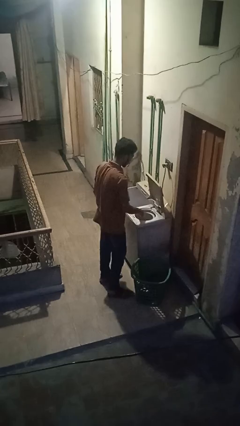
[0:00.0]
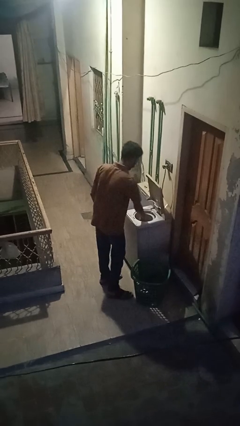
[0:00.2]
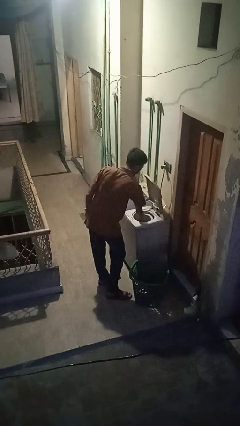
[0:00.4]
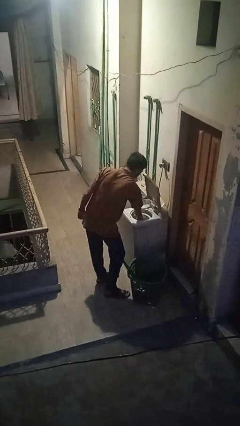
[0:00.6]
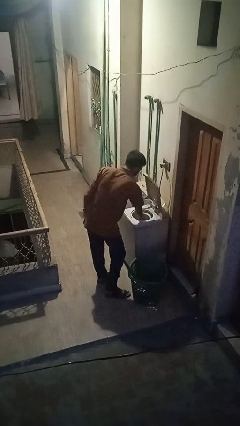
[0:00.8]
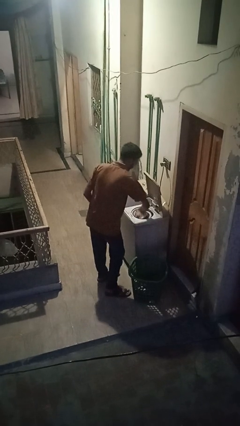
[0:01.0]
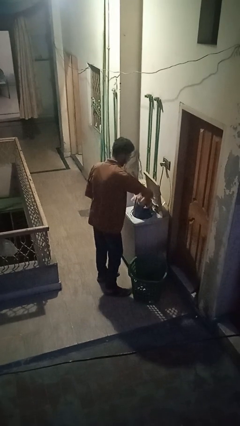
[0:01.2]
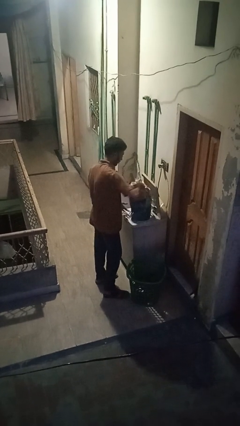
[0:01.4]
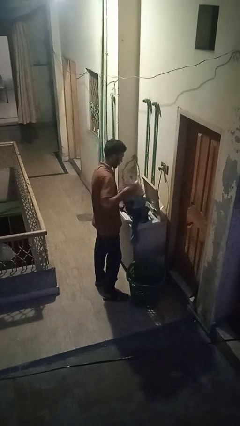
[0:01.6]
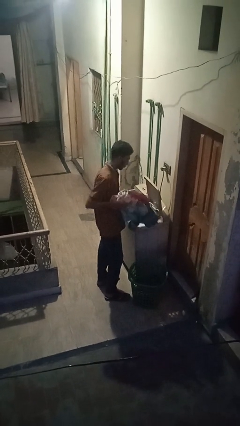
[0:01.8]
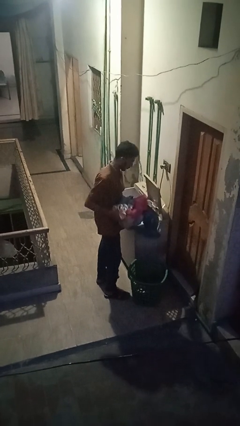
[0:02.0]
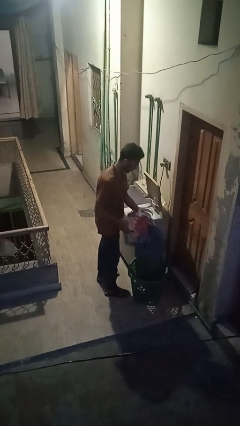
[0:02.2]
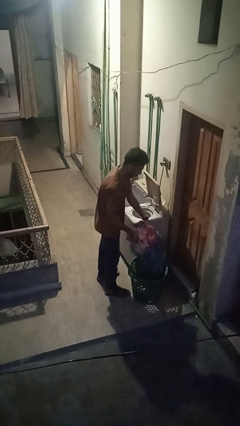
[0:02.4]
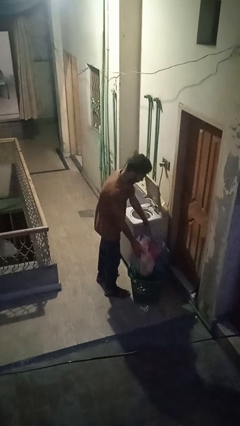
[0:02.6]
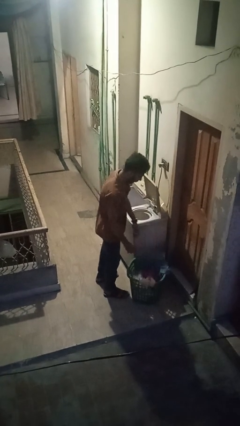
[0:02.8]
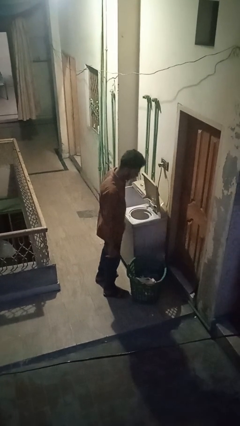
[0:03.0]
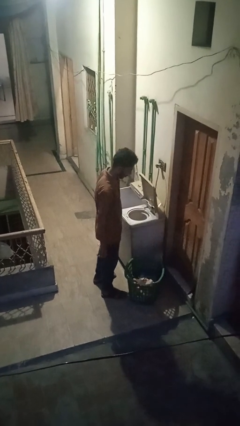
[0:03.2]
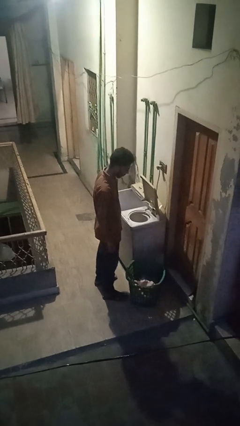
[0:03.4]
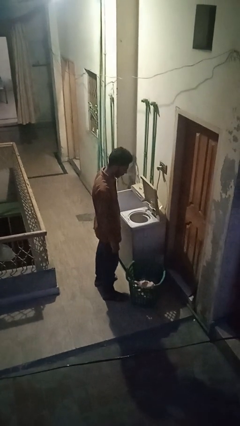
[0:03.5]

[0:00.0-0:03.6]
person unloads dryer

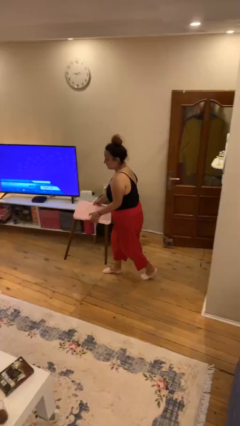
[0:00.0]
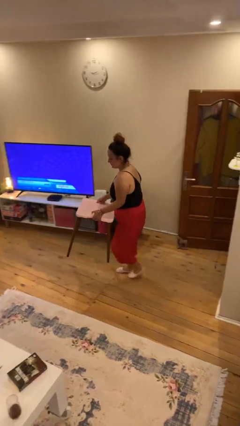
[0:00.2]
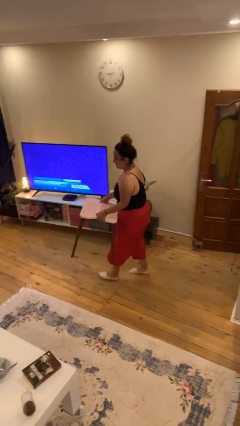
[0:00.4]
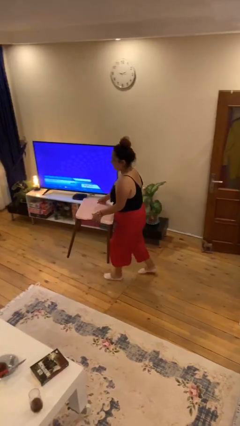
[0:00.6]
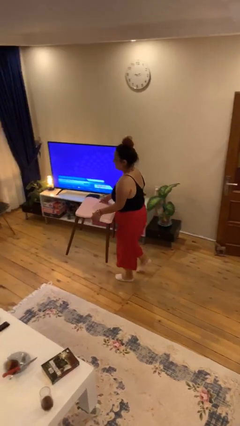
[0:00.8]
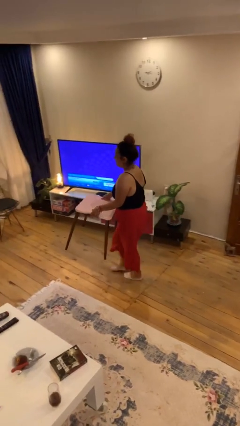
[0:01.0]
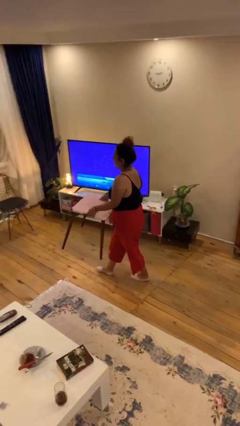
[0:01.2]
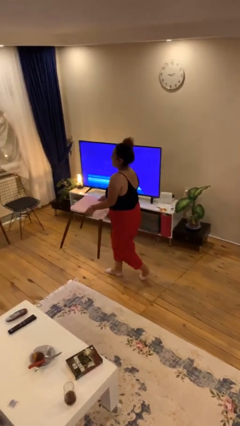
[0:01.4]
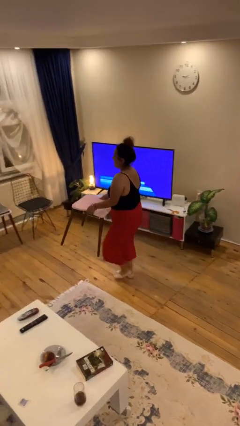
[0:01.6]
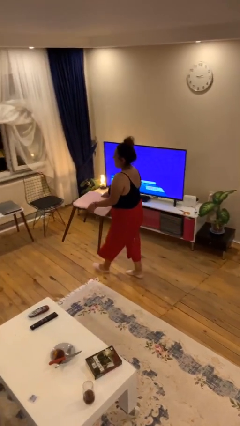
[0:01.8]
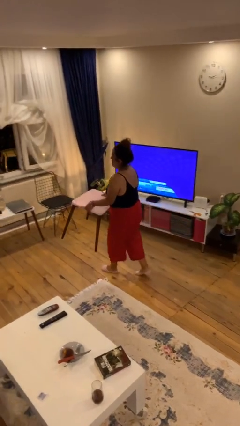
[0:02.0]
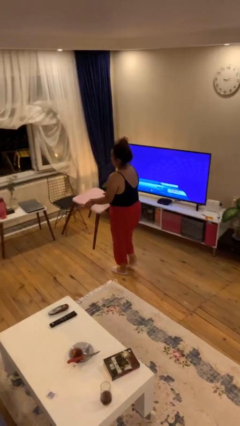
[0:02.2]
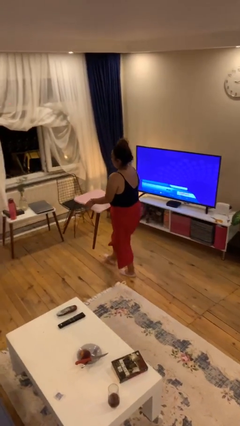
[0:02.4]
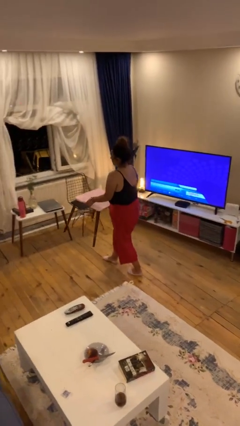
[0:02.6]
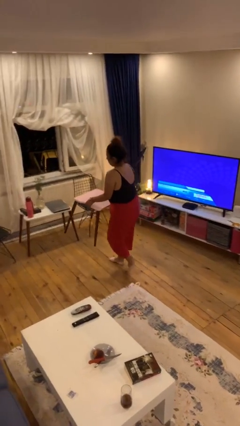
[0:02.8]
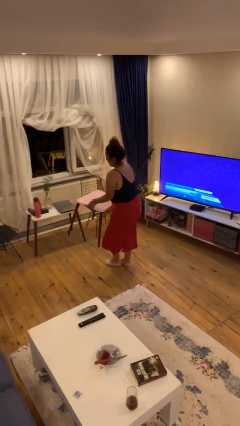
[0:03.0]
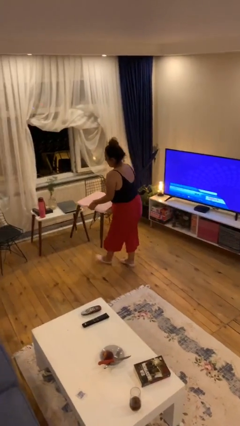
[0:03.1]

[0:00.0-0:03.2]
person carries heavy object

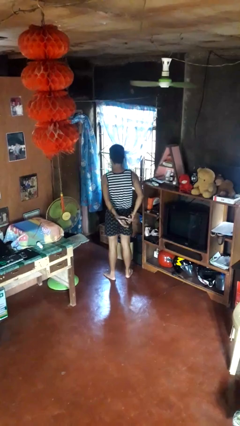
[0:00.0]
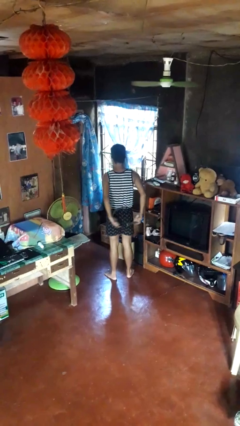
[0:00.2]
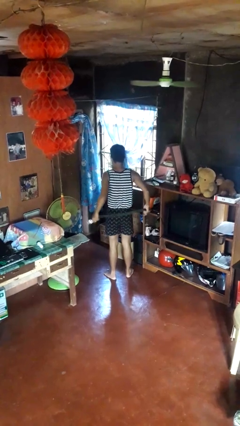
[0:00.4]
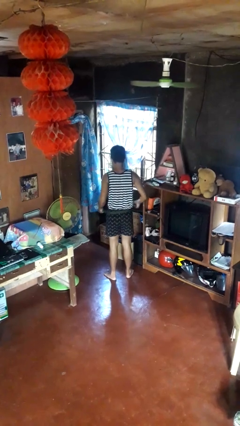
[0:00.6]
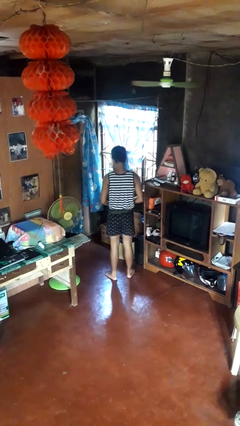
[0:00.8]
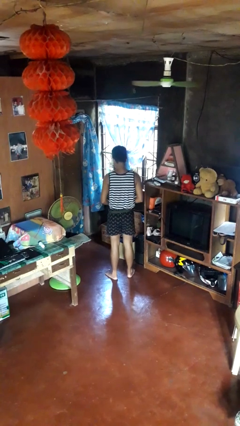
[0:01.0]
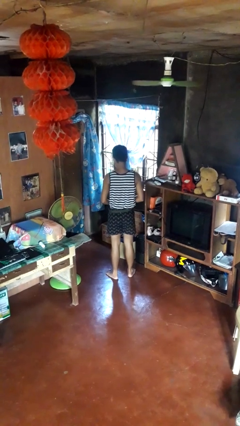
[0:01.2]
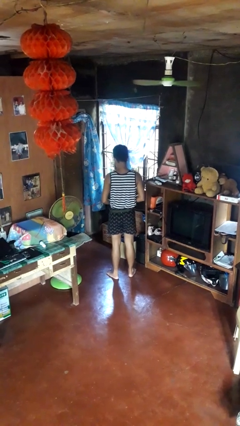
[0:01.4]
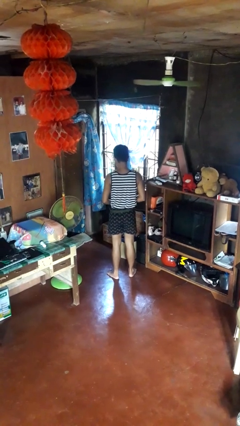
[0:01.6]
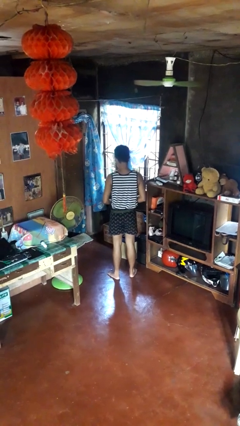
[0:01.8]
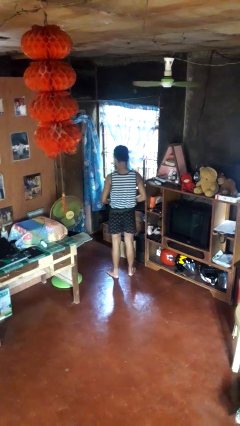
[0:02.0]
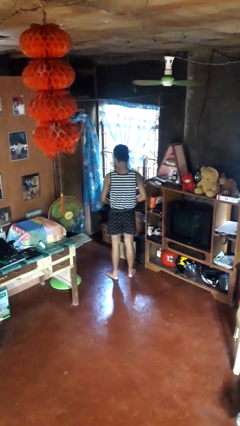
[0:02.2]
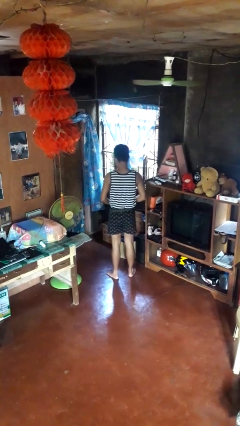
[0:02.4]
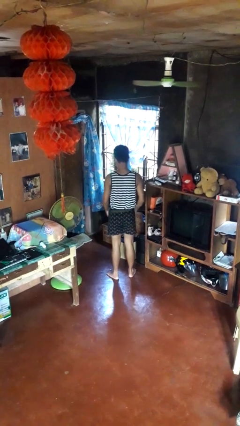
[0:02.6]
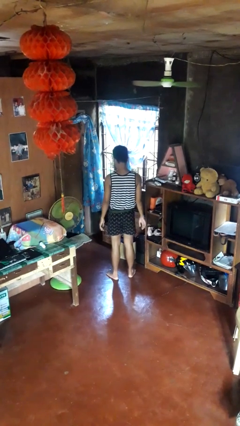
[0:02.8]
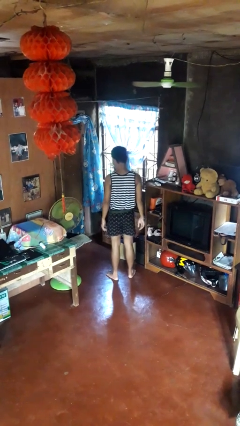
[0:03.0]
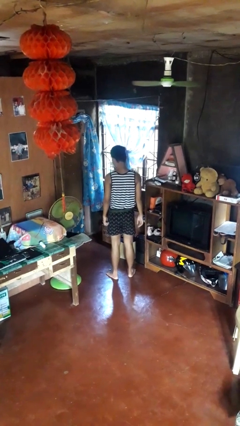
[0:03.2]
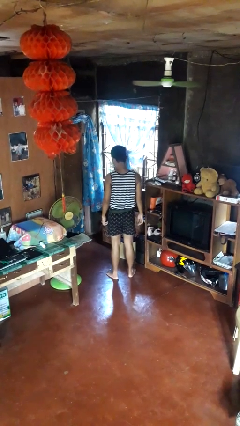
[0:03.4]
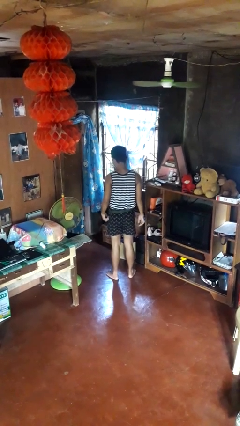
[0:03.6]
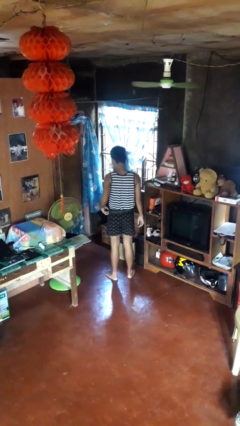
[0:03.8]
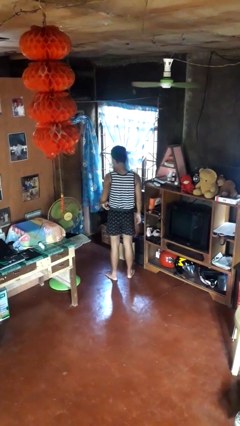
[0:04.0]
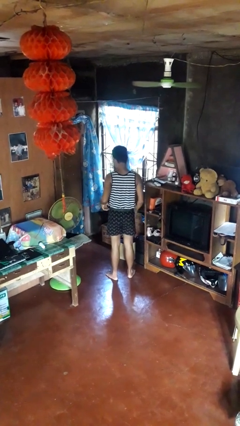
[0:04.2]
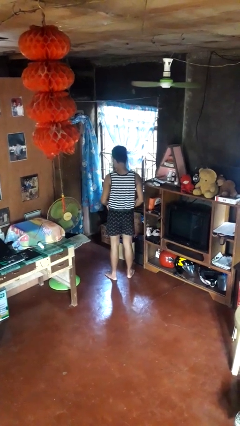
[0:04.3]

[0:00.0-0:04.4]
person puts on belt

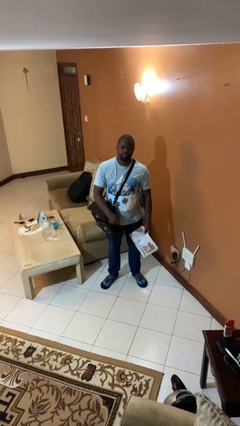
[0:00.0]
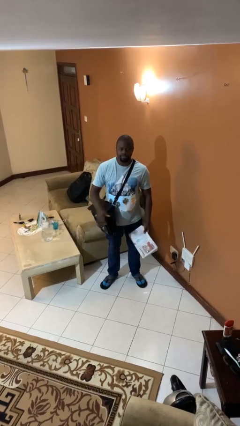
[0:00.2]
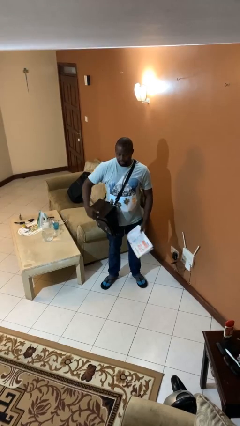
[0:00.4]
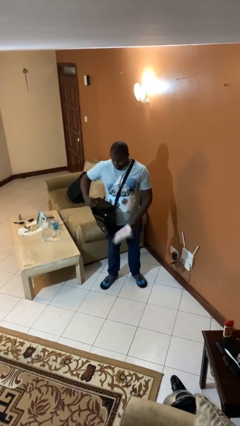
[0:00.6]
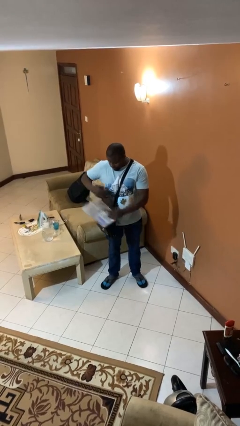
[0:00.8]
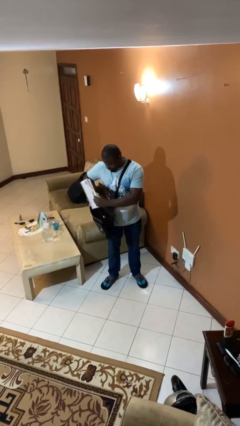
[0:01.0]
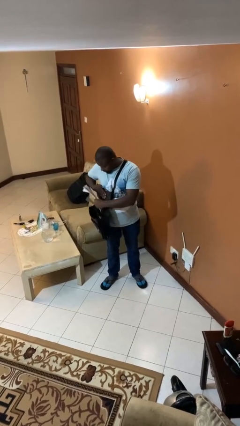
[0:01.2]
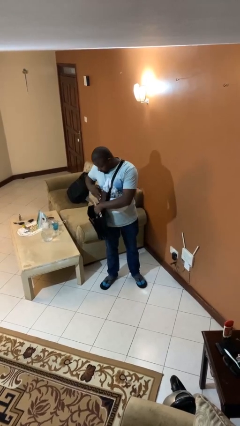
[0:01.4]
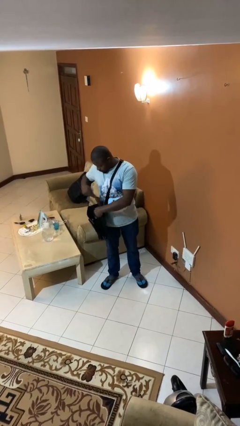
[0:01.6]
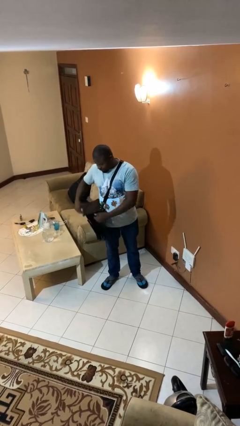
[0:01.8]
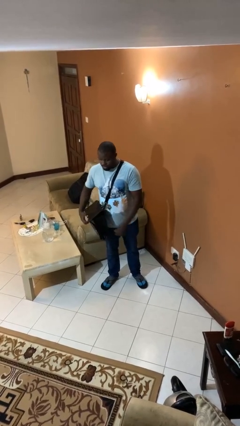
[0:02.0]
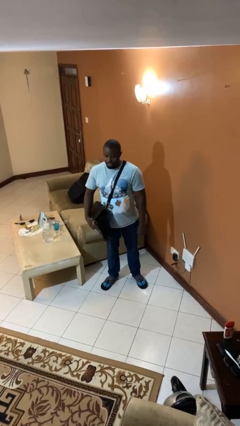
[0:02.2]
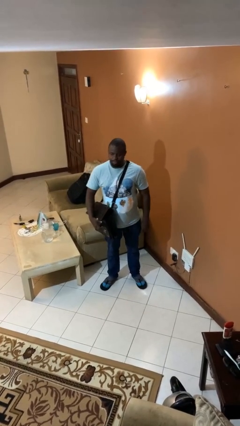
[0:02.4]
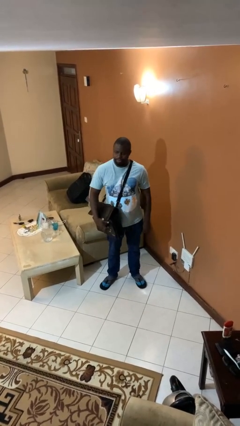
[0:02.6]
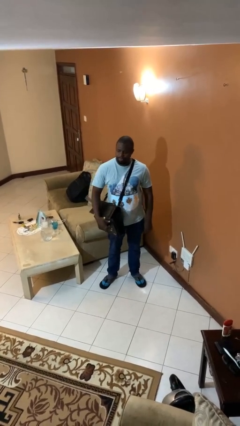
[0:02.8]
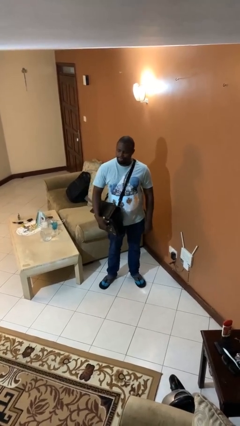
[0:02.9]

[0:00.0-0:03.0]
person puts object into purse

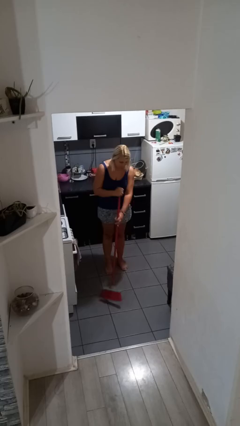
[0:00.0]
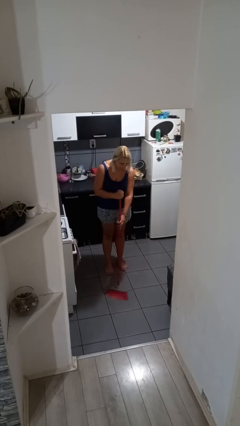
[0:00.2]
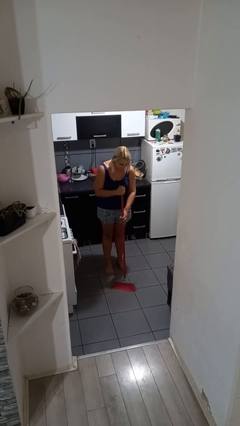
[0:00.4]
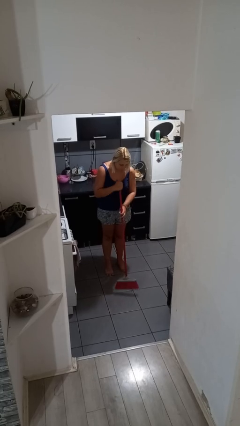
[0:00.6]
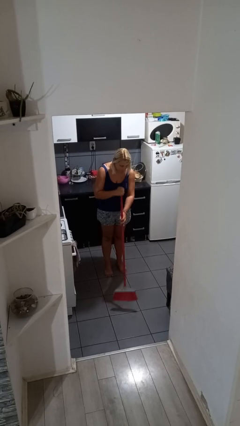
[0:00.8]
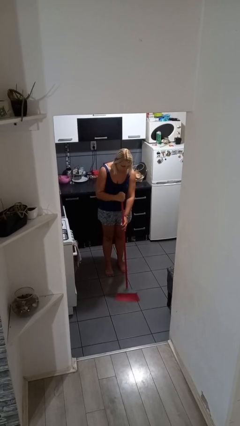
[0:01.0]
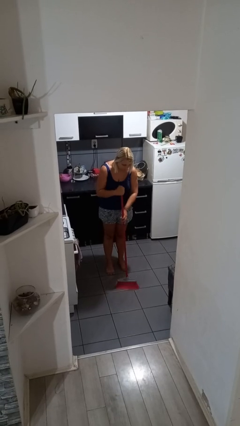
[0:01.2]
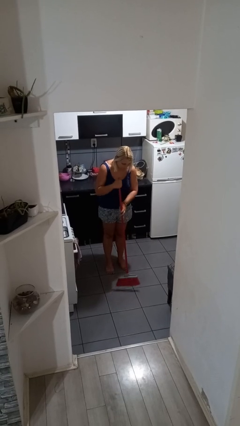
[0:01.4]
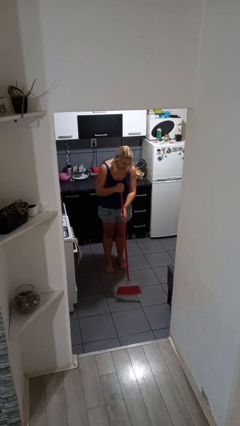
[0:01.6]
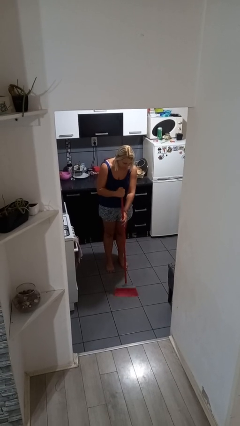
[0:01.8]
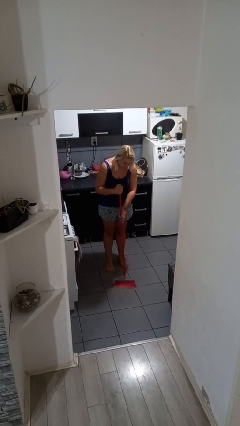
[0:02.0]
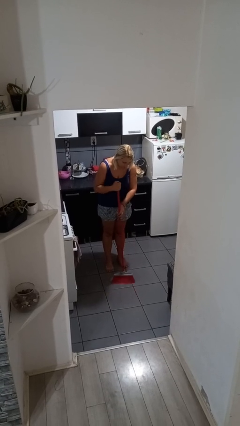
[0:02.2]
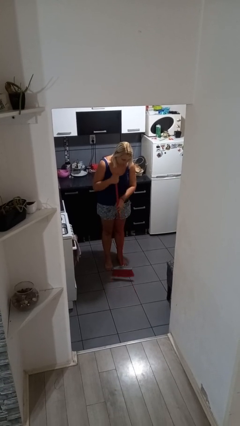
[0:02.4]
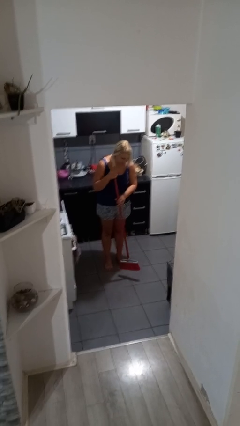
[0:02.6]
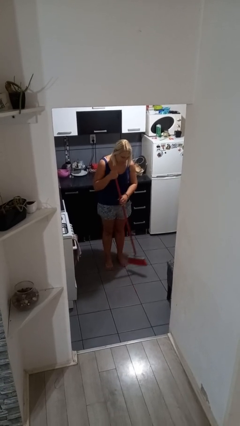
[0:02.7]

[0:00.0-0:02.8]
person sweeps floor

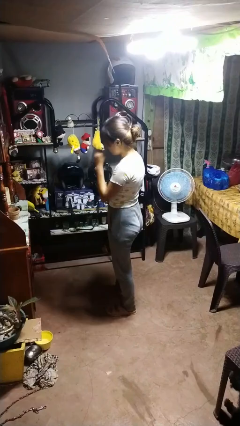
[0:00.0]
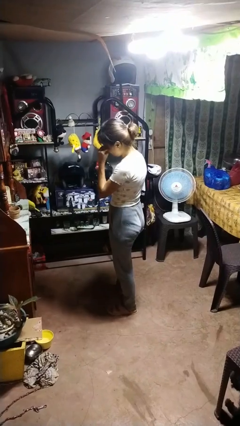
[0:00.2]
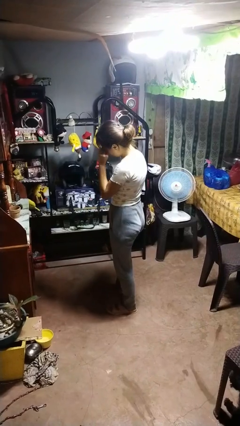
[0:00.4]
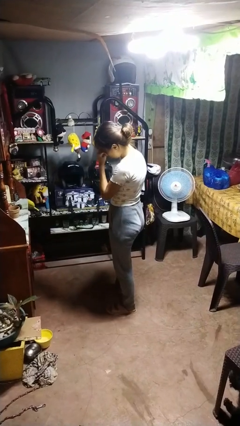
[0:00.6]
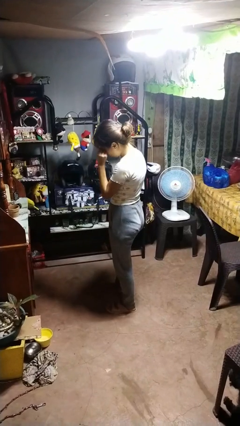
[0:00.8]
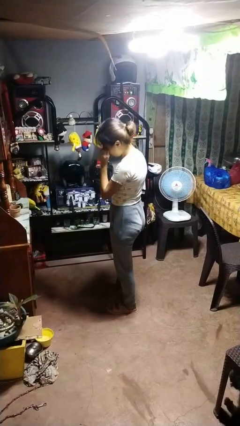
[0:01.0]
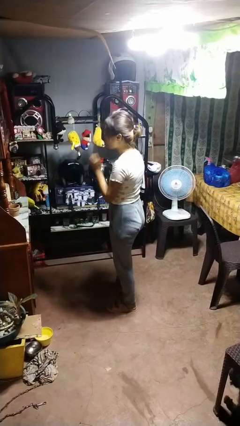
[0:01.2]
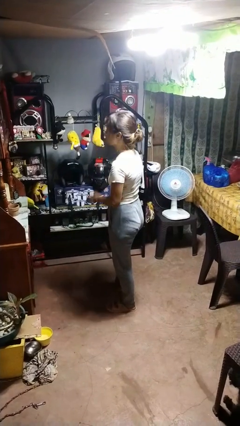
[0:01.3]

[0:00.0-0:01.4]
person rubs eyes
